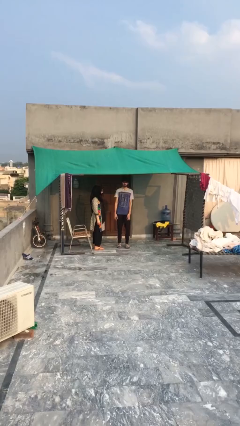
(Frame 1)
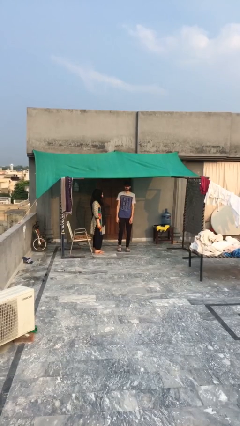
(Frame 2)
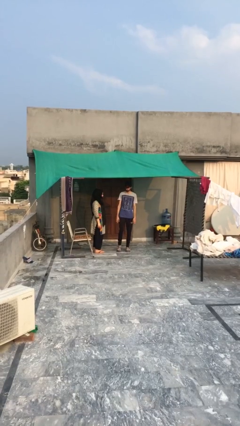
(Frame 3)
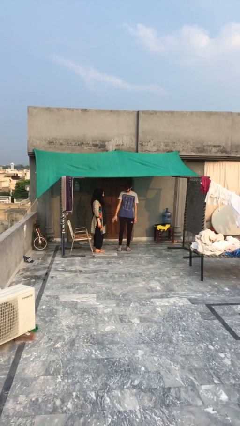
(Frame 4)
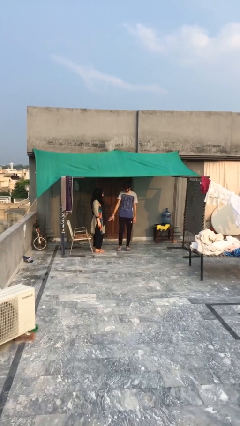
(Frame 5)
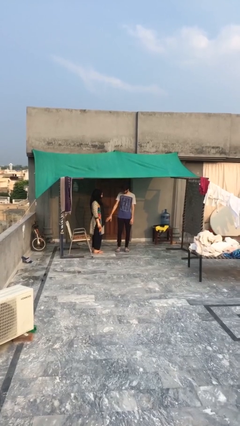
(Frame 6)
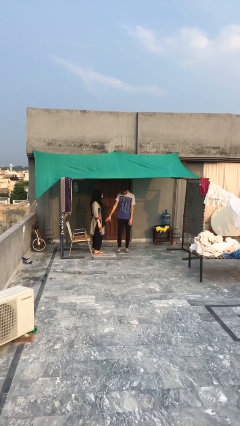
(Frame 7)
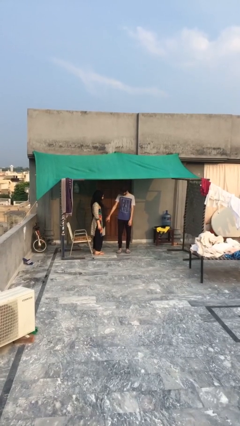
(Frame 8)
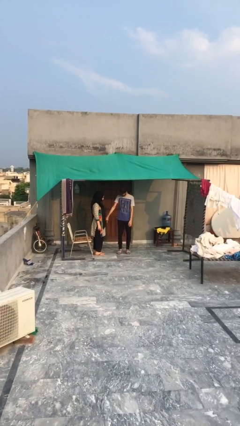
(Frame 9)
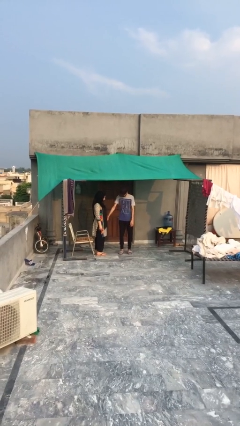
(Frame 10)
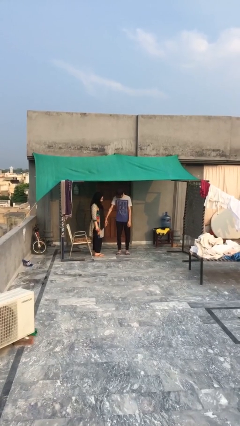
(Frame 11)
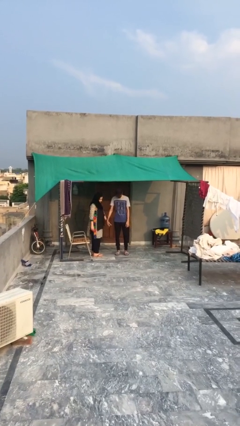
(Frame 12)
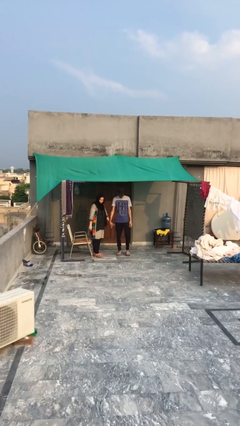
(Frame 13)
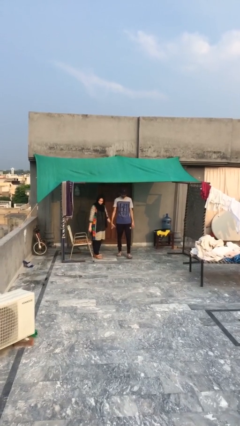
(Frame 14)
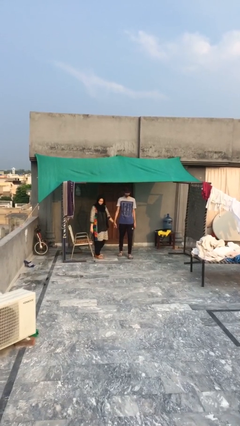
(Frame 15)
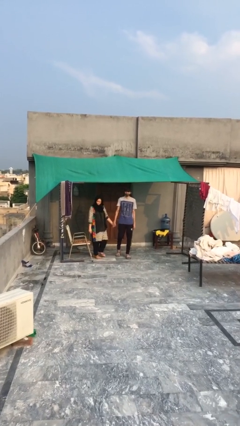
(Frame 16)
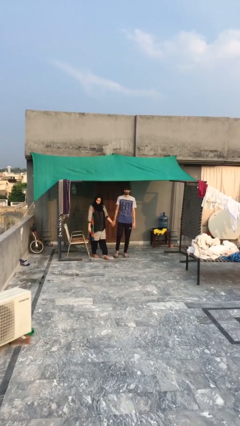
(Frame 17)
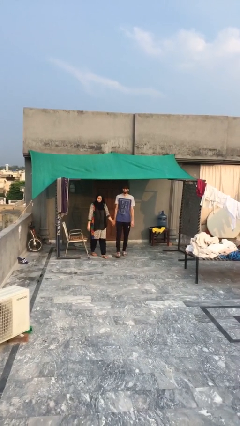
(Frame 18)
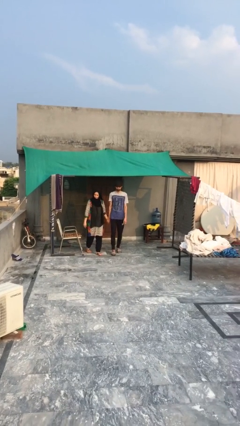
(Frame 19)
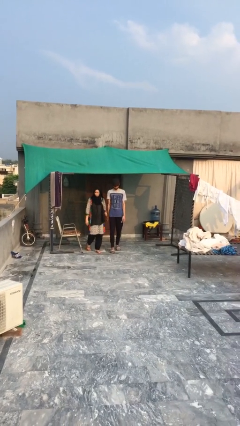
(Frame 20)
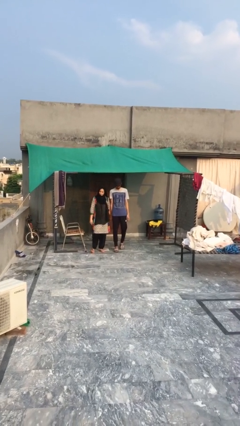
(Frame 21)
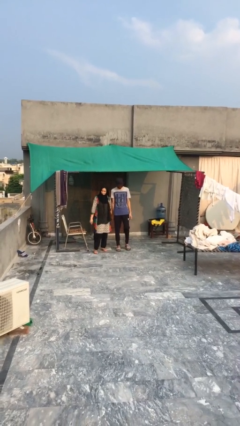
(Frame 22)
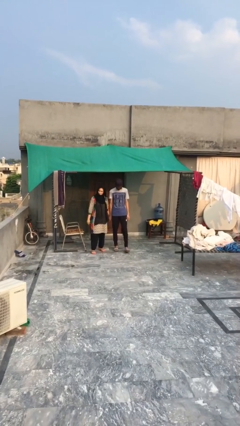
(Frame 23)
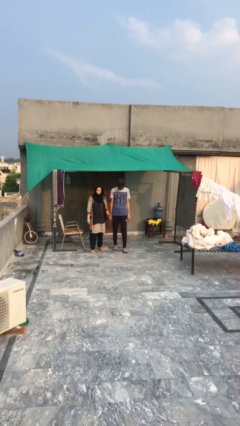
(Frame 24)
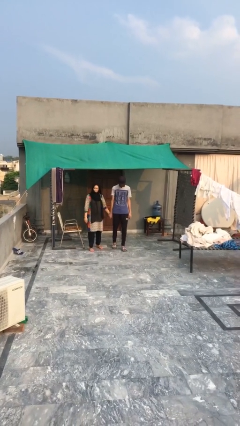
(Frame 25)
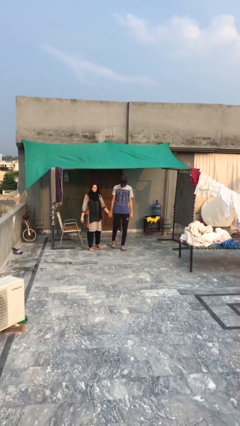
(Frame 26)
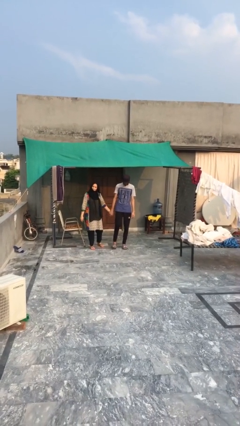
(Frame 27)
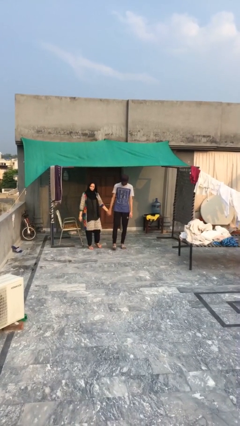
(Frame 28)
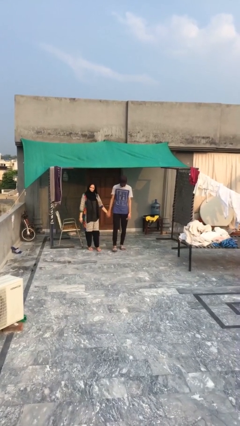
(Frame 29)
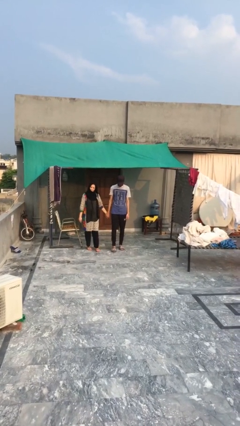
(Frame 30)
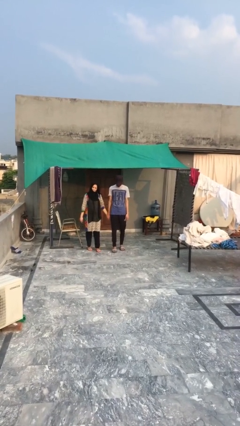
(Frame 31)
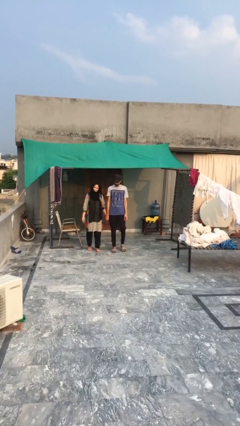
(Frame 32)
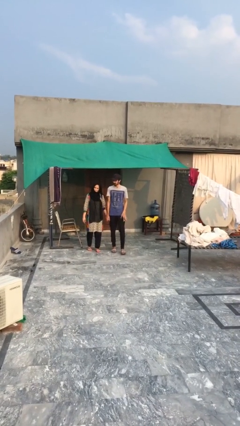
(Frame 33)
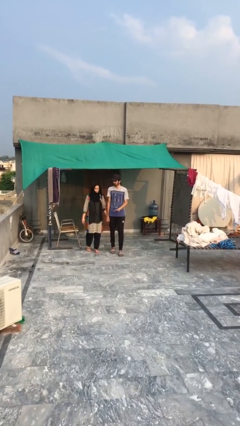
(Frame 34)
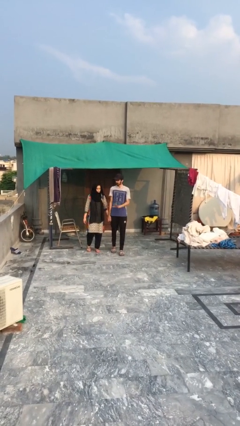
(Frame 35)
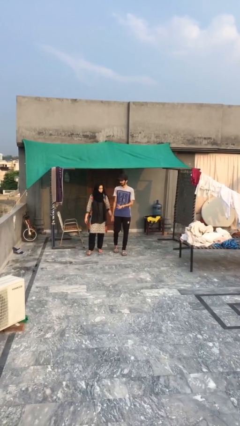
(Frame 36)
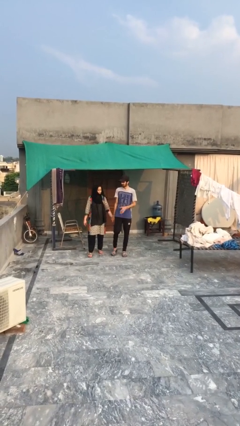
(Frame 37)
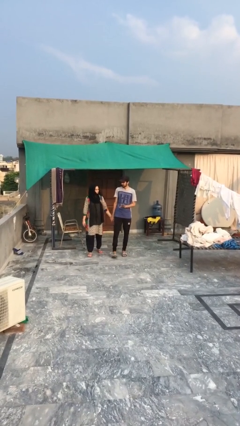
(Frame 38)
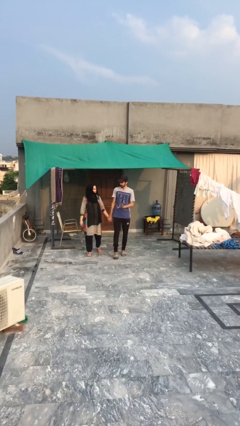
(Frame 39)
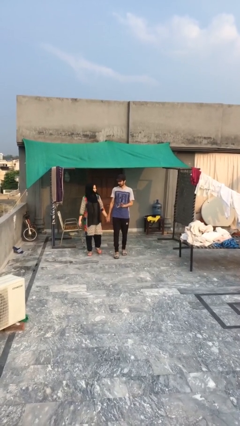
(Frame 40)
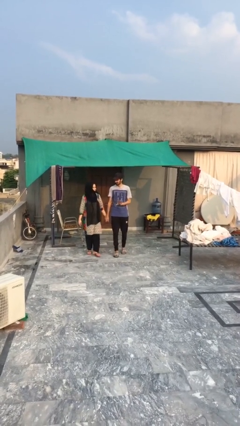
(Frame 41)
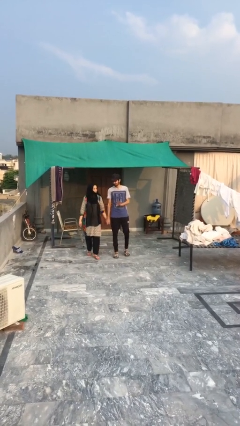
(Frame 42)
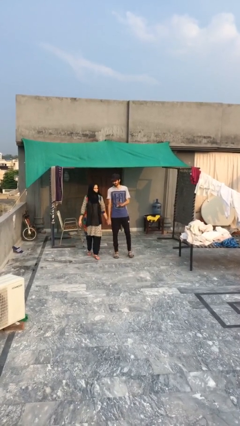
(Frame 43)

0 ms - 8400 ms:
person holds hand

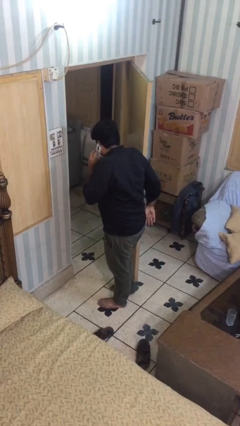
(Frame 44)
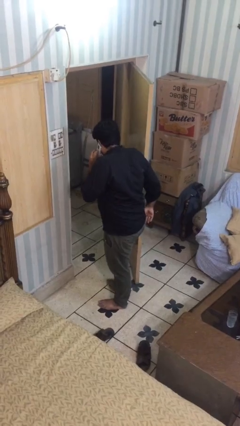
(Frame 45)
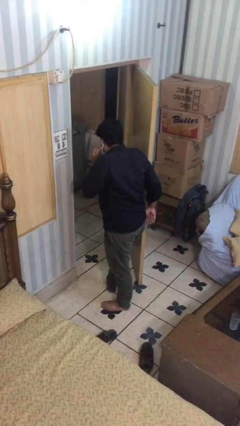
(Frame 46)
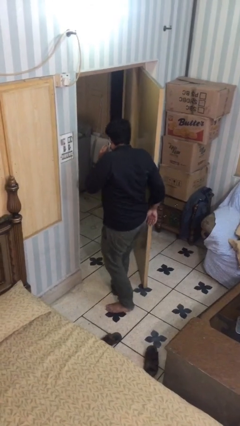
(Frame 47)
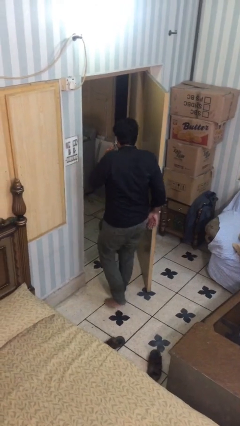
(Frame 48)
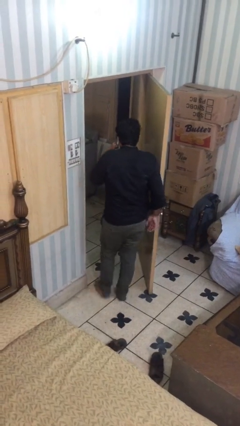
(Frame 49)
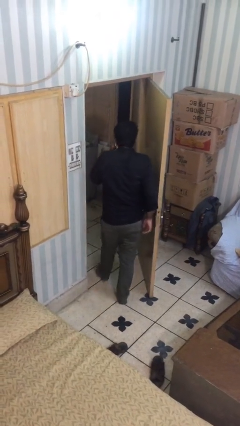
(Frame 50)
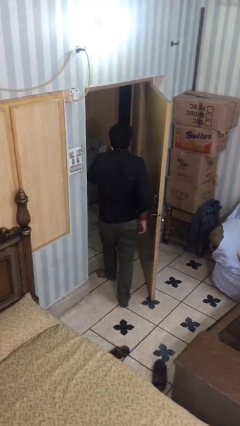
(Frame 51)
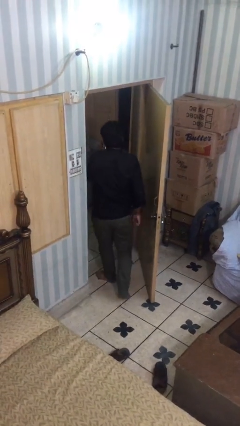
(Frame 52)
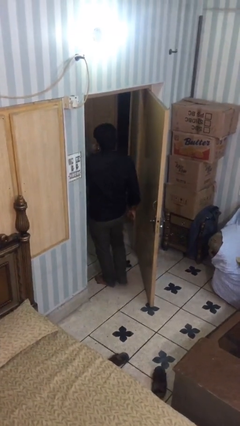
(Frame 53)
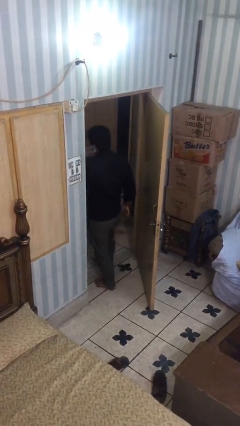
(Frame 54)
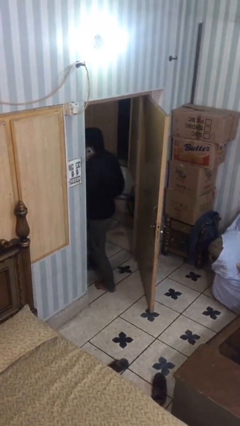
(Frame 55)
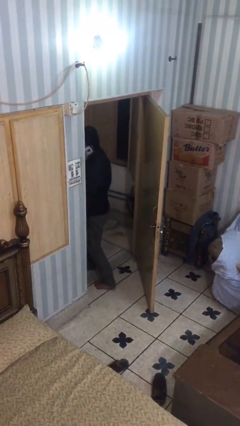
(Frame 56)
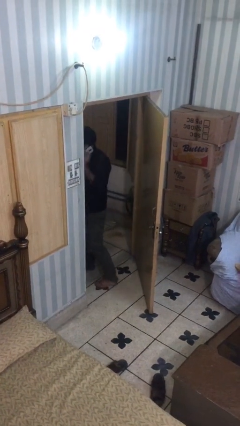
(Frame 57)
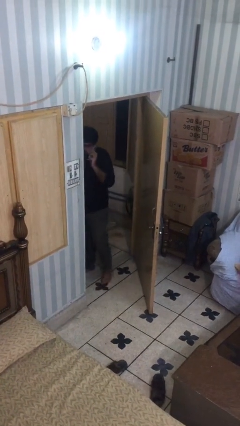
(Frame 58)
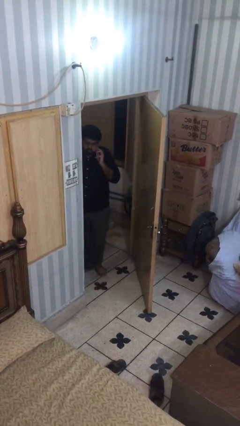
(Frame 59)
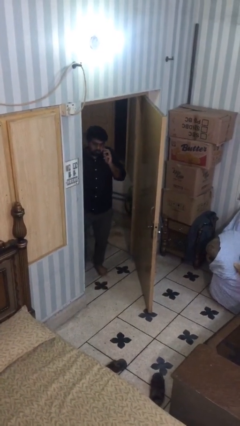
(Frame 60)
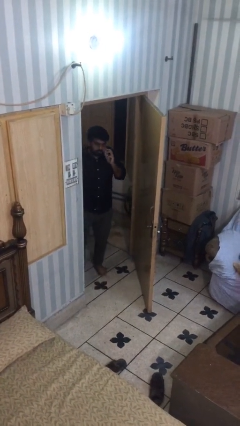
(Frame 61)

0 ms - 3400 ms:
person exits scene through structure

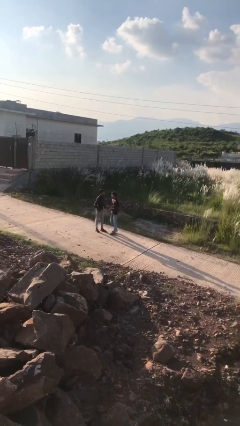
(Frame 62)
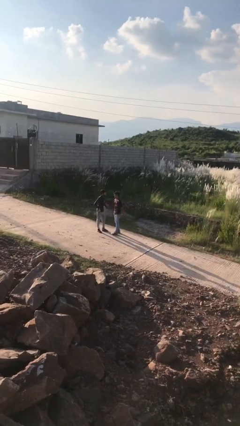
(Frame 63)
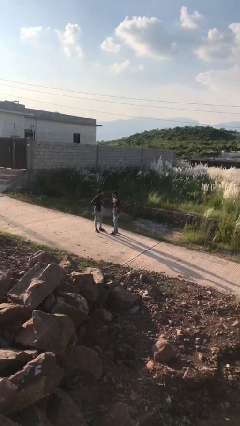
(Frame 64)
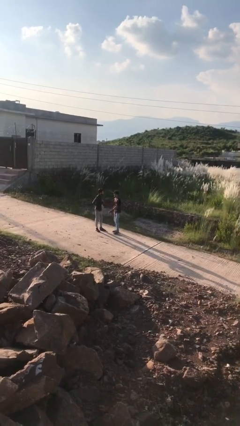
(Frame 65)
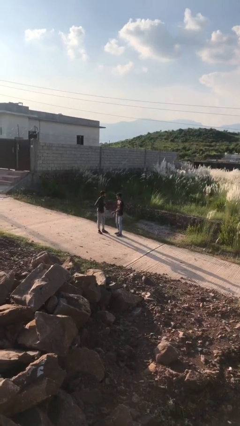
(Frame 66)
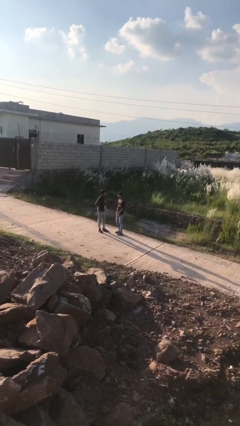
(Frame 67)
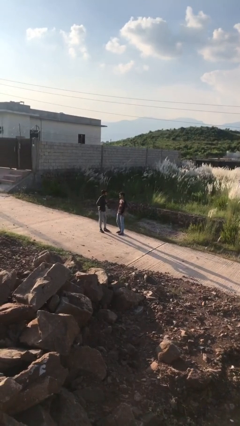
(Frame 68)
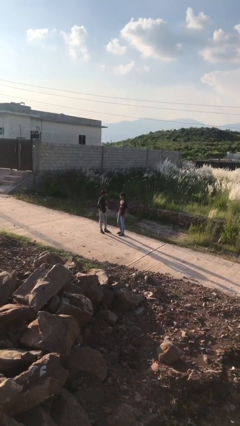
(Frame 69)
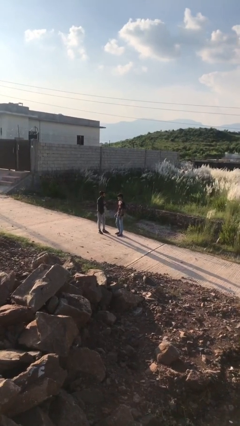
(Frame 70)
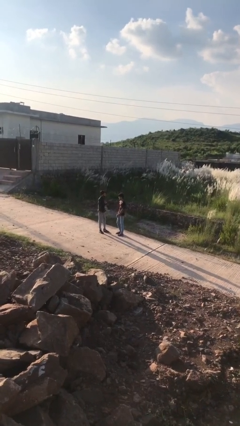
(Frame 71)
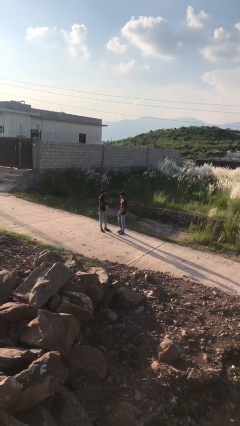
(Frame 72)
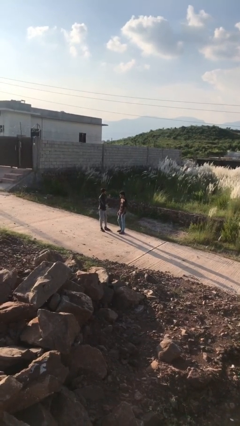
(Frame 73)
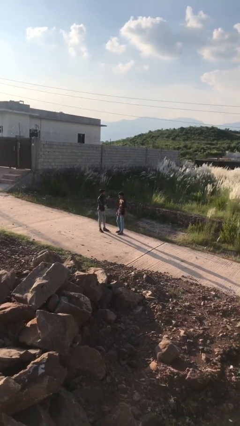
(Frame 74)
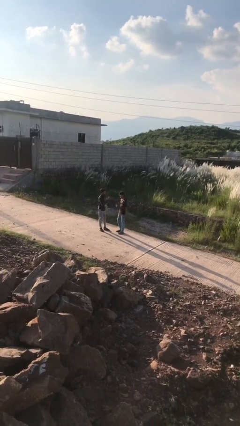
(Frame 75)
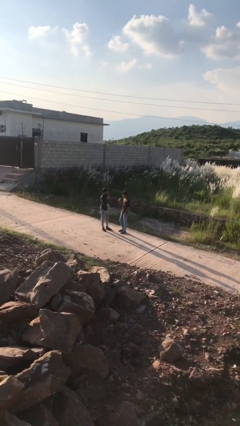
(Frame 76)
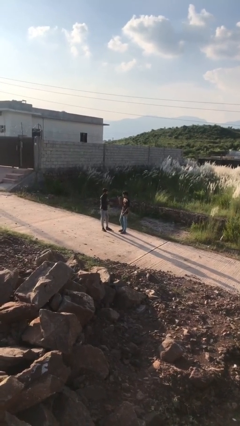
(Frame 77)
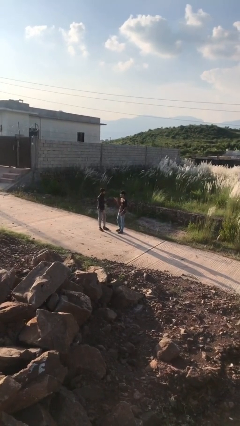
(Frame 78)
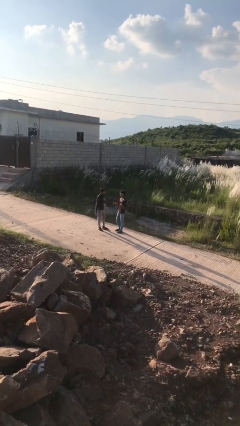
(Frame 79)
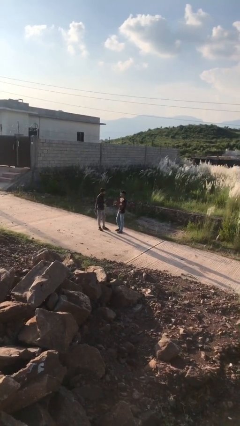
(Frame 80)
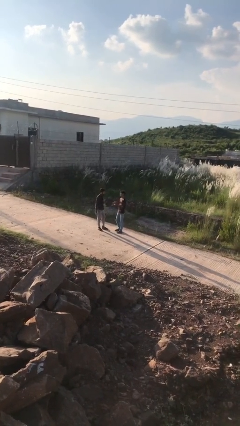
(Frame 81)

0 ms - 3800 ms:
person talks to person

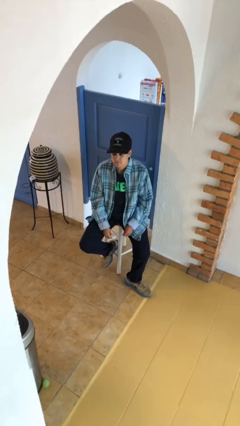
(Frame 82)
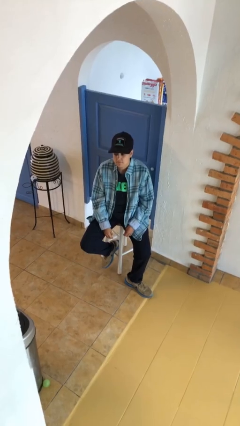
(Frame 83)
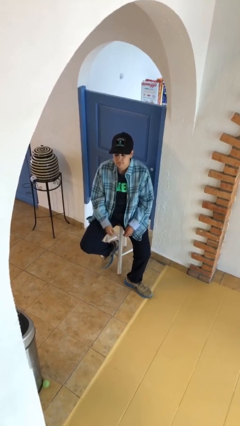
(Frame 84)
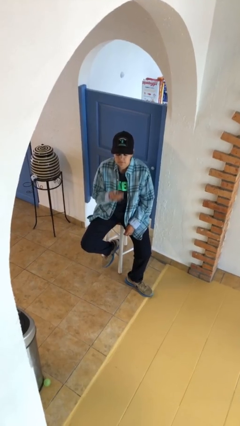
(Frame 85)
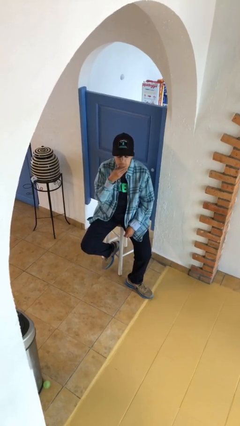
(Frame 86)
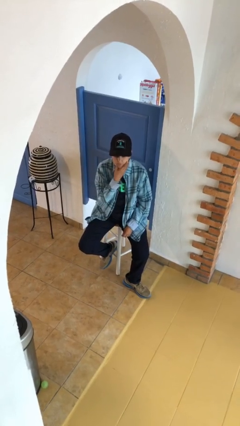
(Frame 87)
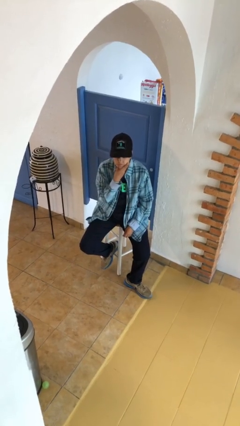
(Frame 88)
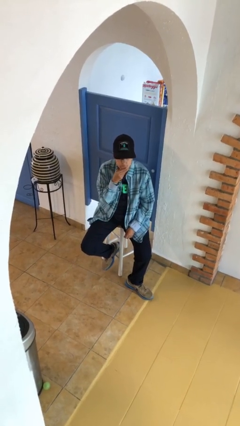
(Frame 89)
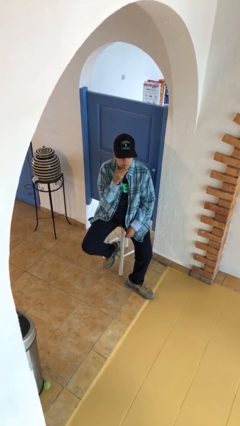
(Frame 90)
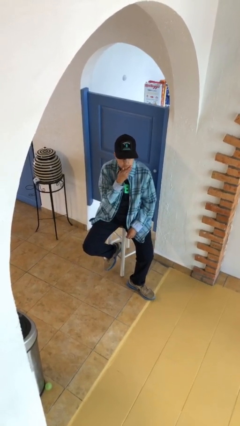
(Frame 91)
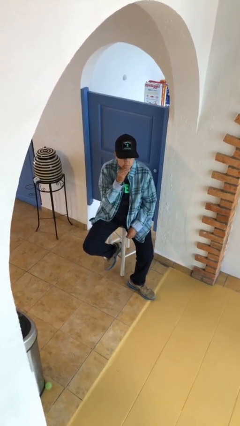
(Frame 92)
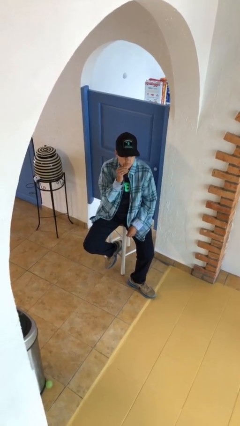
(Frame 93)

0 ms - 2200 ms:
person strokes chin
